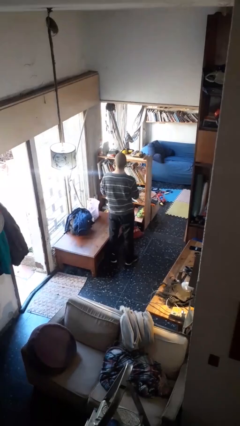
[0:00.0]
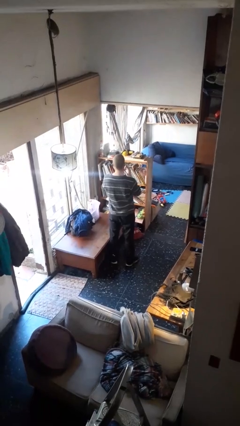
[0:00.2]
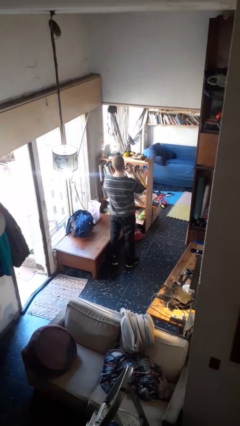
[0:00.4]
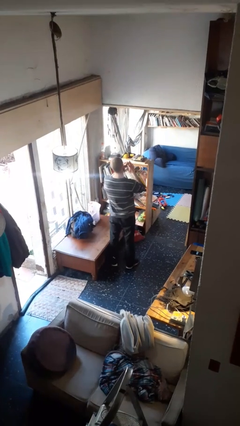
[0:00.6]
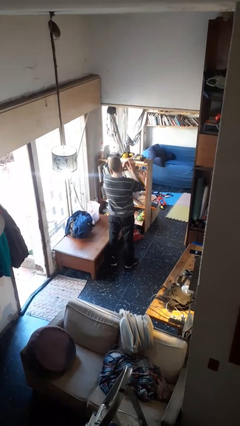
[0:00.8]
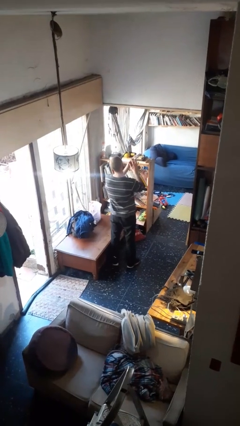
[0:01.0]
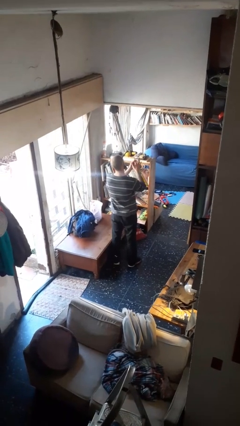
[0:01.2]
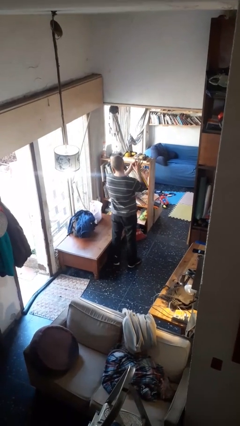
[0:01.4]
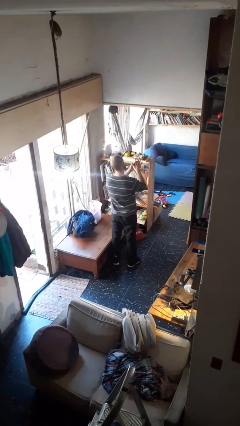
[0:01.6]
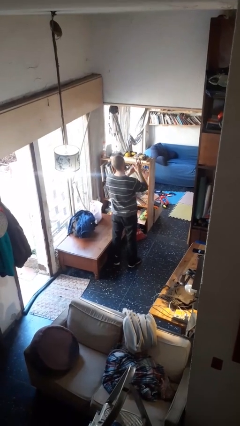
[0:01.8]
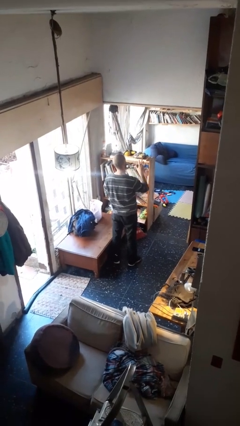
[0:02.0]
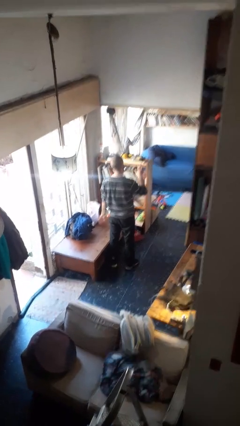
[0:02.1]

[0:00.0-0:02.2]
person puts on ring

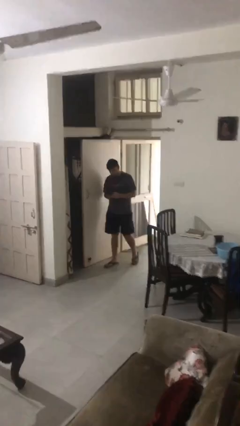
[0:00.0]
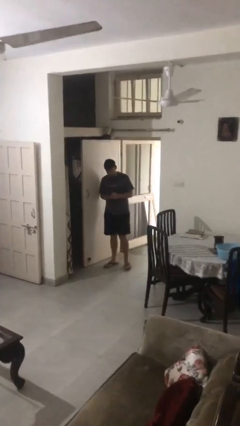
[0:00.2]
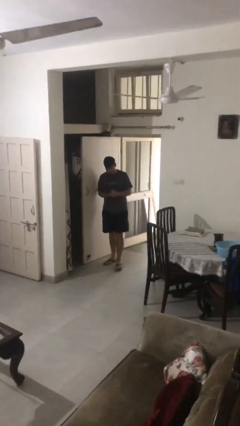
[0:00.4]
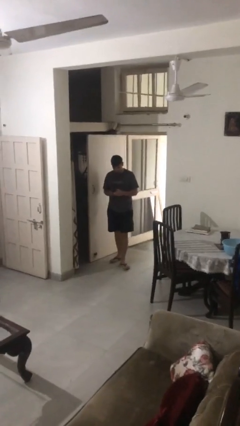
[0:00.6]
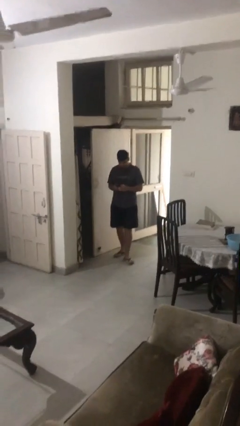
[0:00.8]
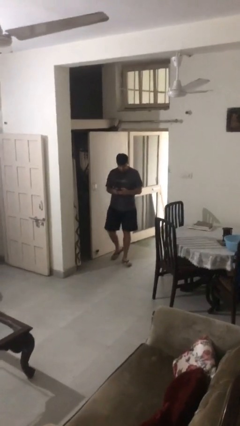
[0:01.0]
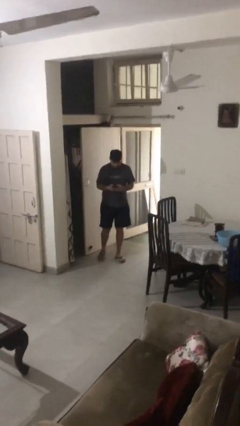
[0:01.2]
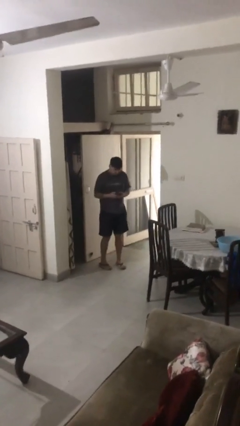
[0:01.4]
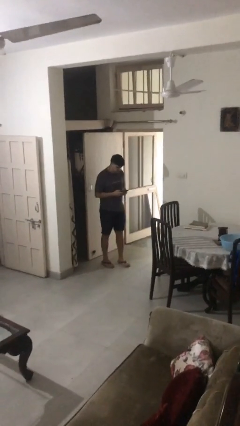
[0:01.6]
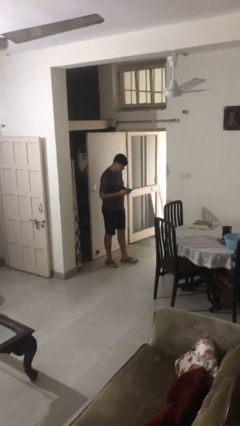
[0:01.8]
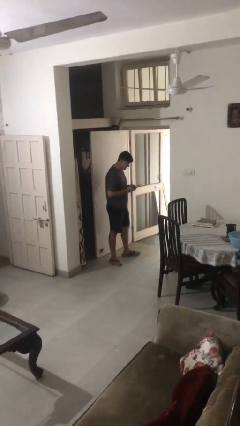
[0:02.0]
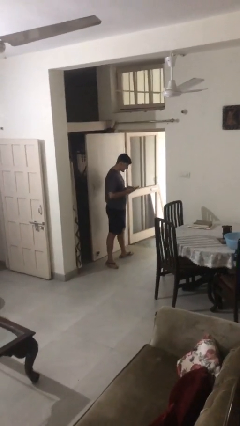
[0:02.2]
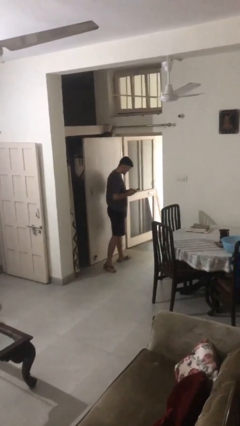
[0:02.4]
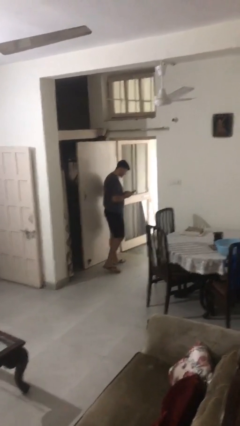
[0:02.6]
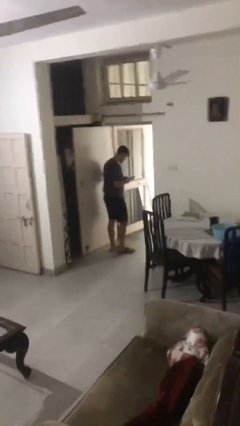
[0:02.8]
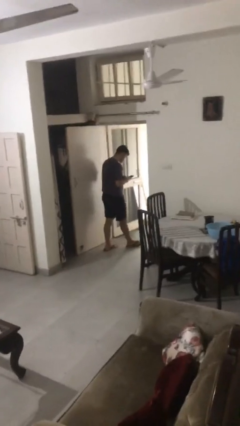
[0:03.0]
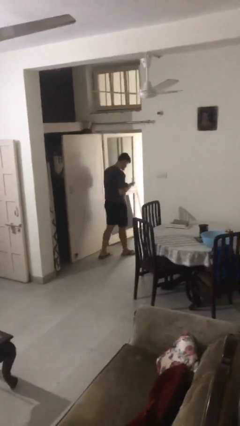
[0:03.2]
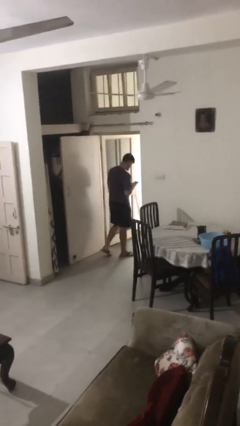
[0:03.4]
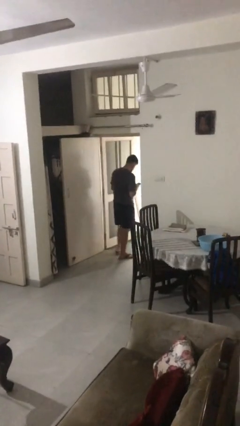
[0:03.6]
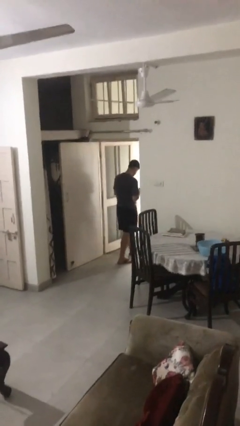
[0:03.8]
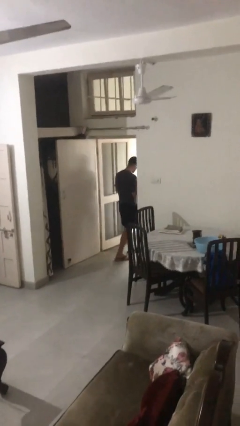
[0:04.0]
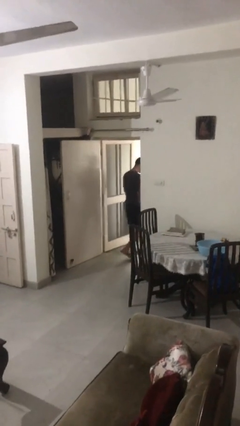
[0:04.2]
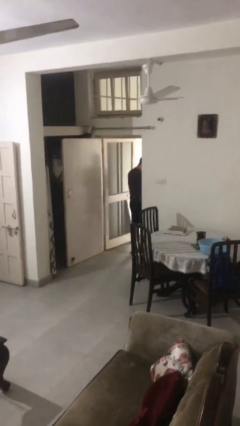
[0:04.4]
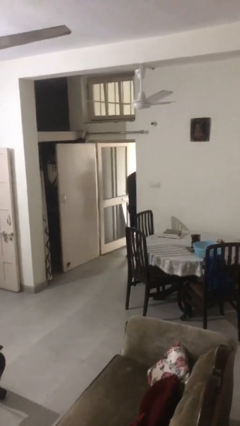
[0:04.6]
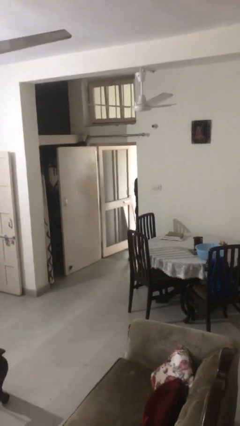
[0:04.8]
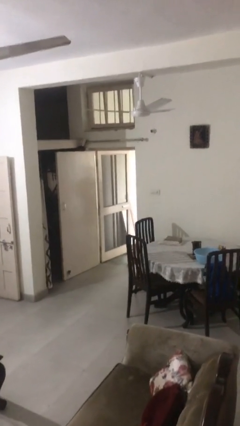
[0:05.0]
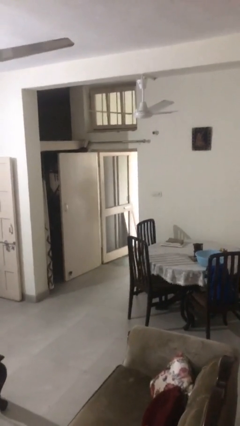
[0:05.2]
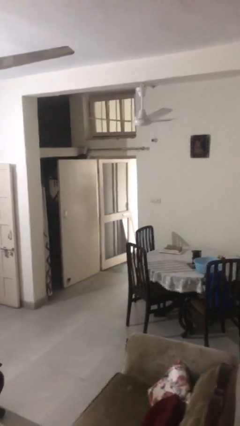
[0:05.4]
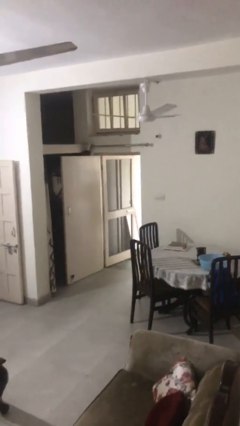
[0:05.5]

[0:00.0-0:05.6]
person exits scene through structure

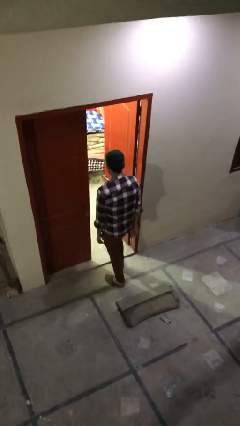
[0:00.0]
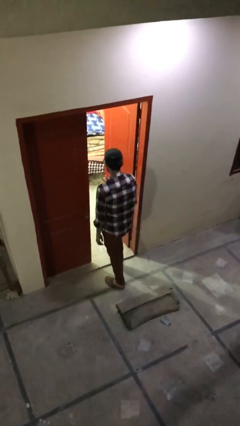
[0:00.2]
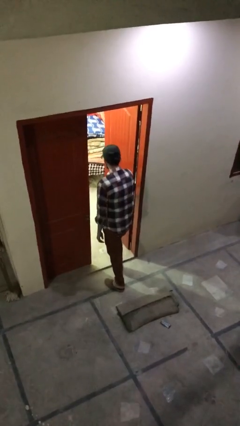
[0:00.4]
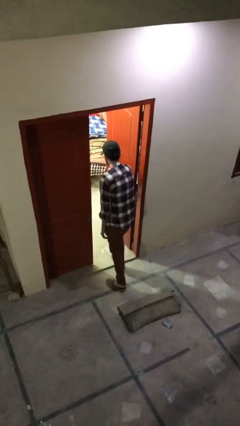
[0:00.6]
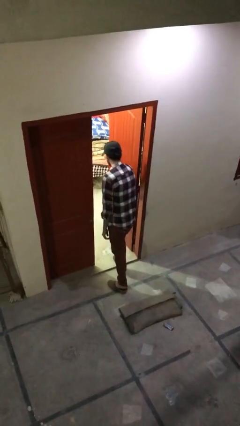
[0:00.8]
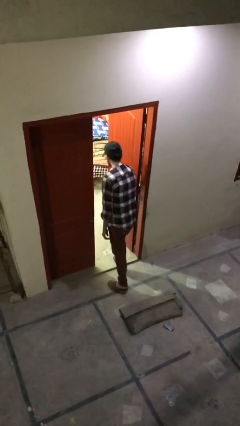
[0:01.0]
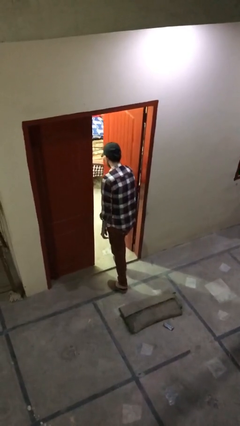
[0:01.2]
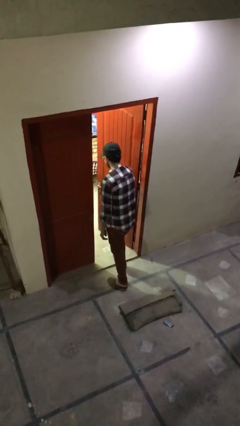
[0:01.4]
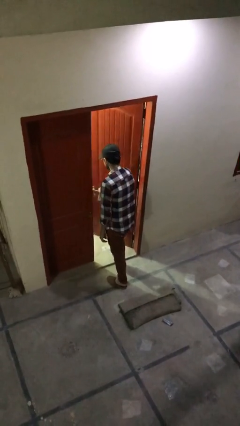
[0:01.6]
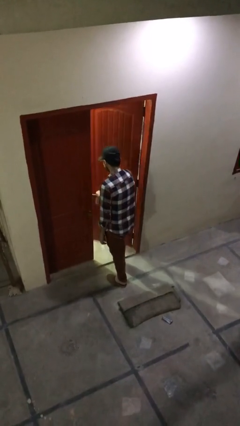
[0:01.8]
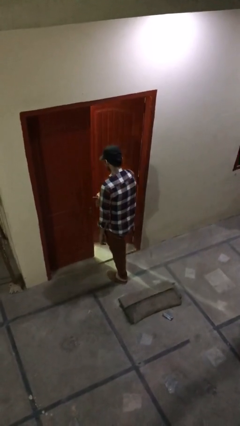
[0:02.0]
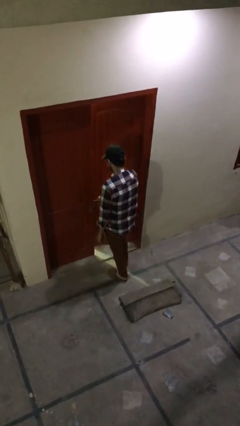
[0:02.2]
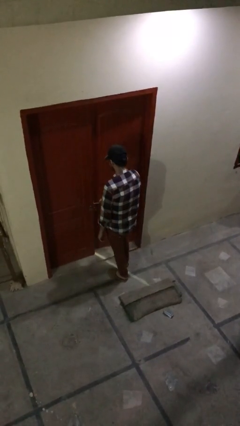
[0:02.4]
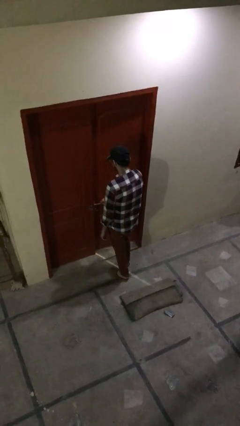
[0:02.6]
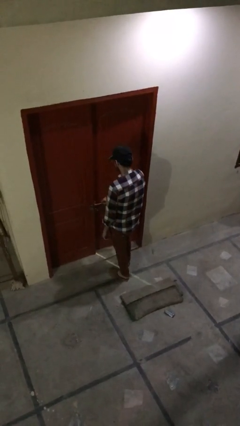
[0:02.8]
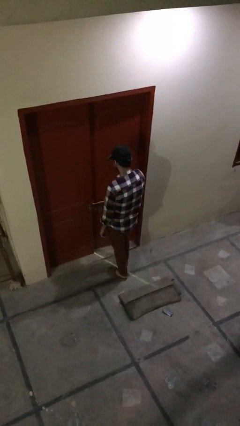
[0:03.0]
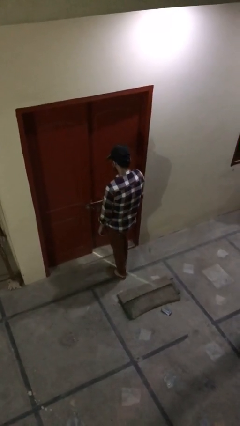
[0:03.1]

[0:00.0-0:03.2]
person closes facility door

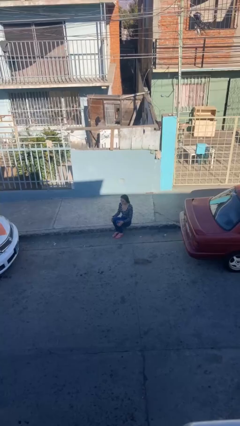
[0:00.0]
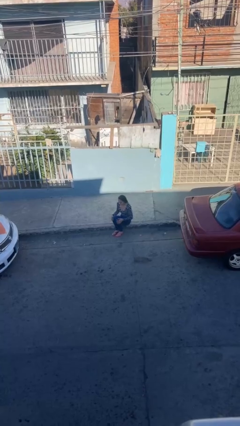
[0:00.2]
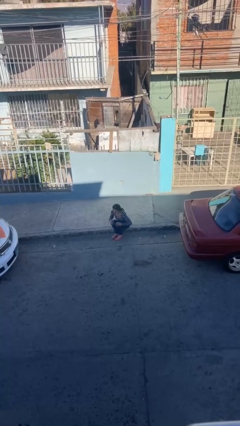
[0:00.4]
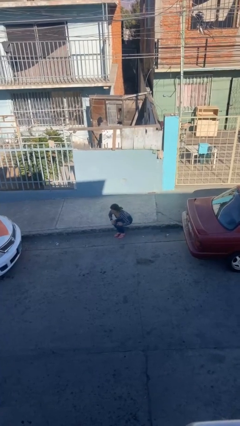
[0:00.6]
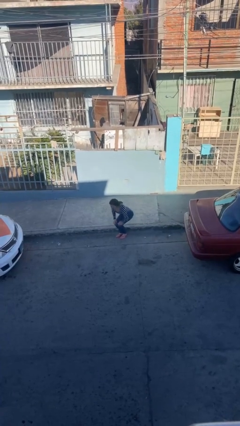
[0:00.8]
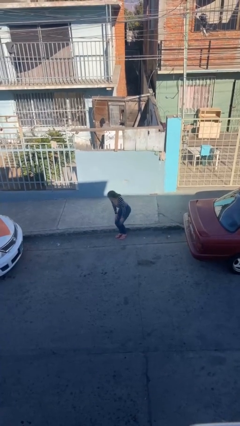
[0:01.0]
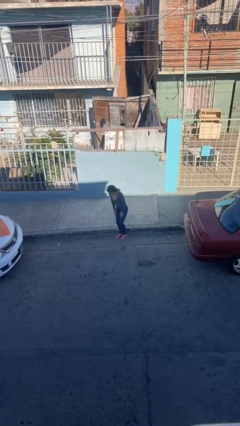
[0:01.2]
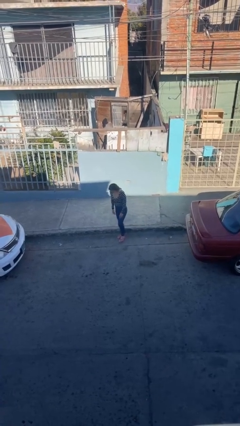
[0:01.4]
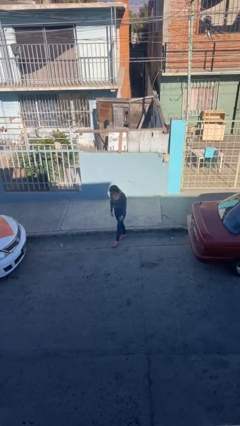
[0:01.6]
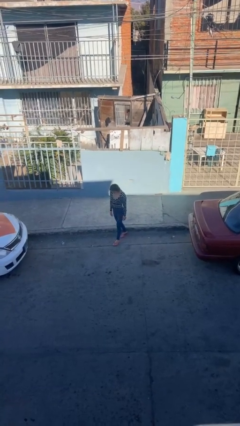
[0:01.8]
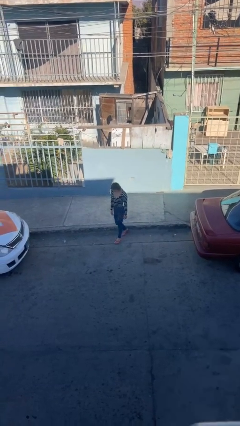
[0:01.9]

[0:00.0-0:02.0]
person stands up

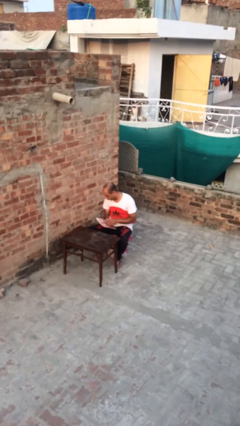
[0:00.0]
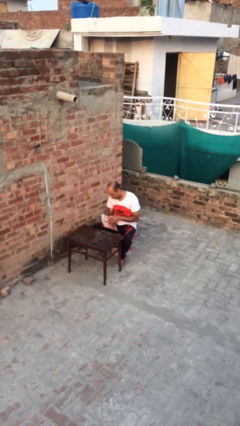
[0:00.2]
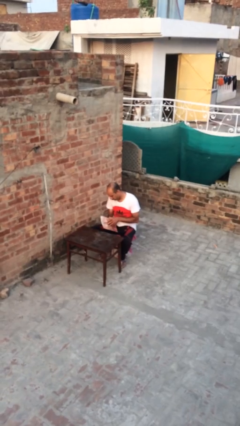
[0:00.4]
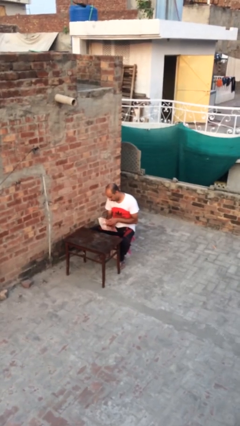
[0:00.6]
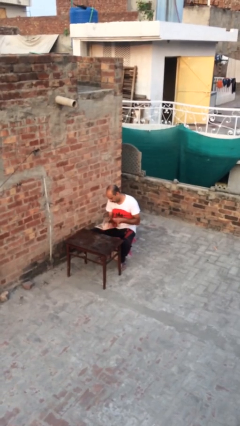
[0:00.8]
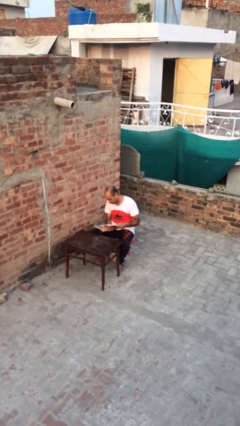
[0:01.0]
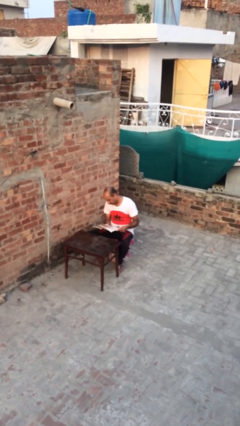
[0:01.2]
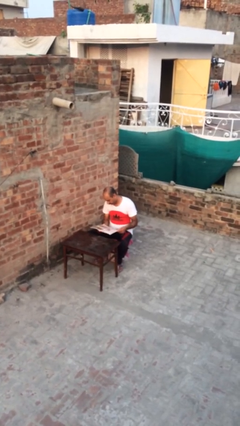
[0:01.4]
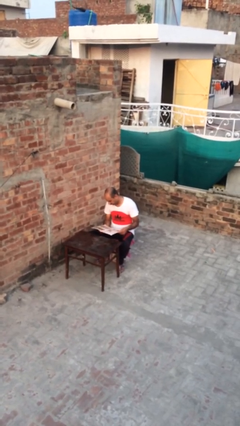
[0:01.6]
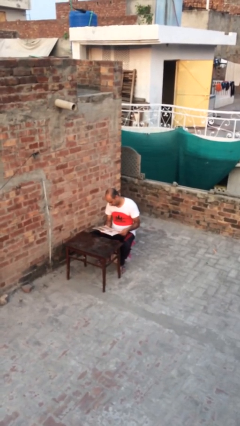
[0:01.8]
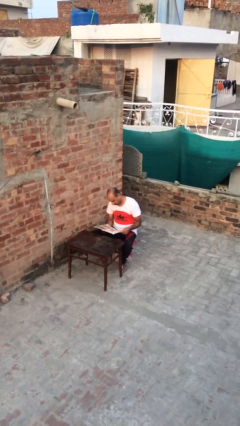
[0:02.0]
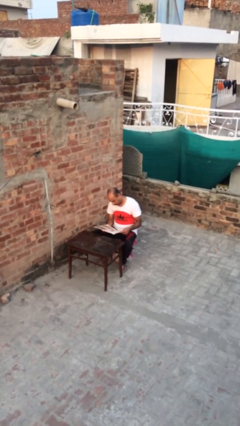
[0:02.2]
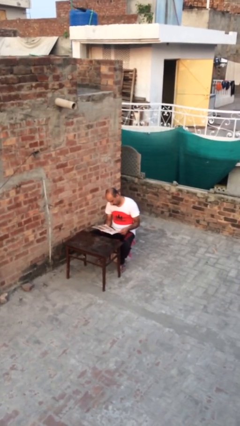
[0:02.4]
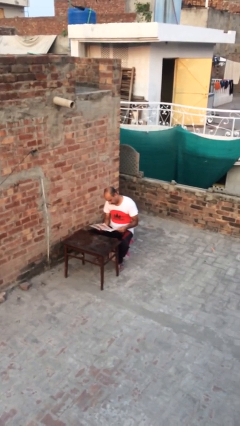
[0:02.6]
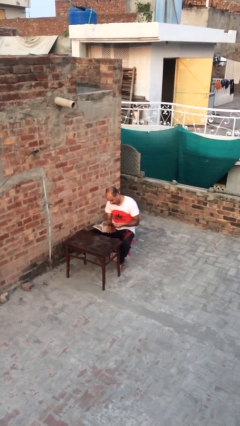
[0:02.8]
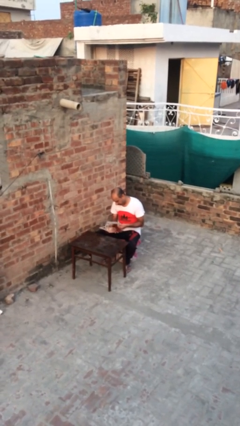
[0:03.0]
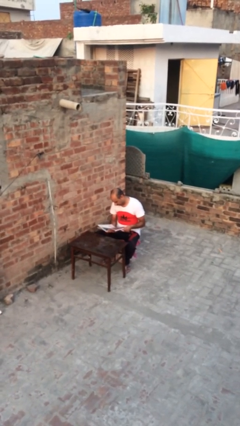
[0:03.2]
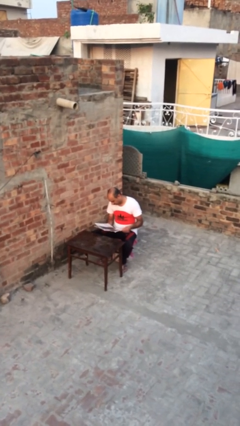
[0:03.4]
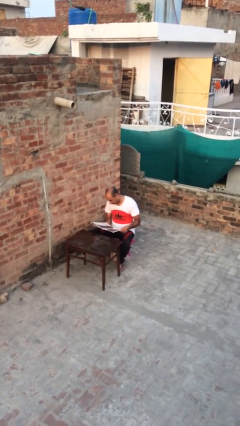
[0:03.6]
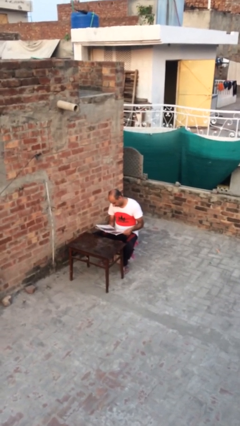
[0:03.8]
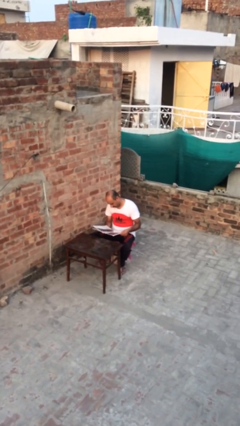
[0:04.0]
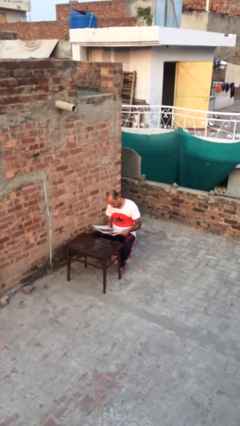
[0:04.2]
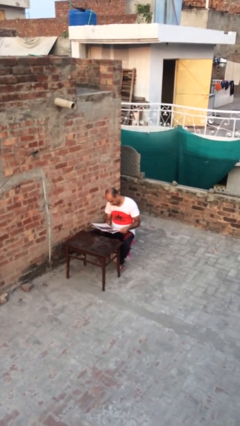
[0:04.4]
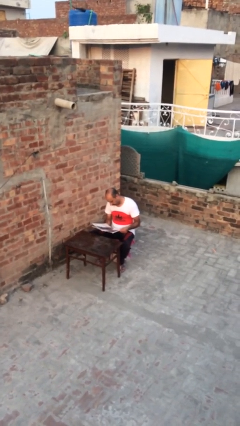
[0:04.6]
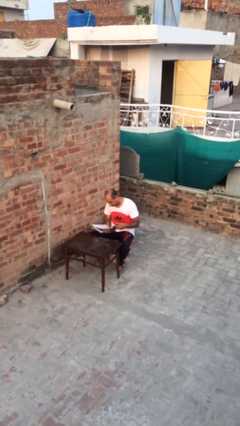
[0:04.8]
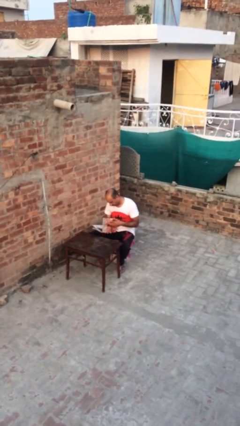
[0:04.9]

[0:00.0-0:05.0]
person reads document
